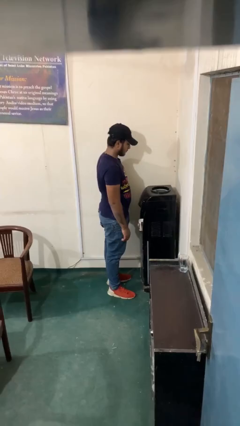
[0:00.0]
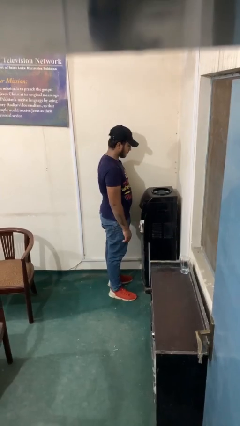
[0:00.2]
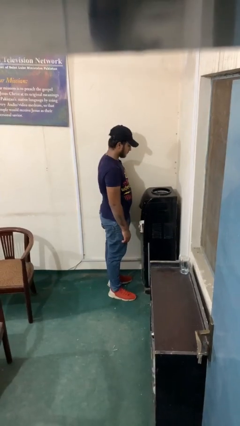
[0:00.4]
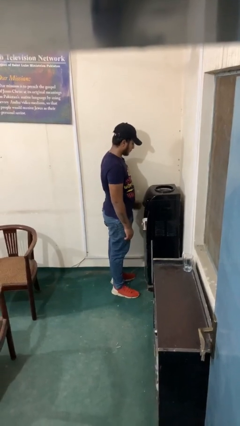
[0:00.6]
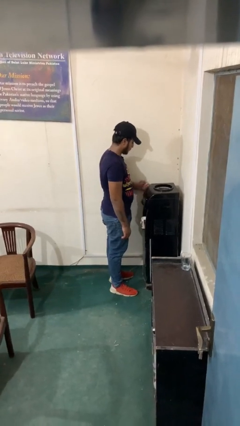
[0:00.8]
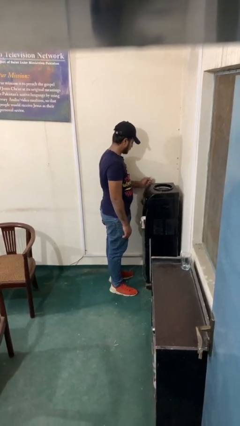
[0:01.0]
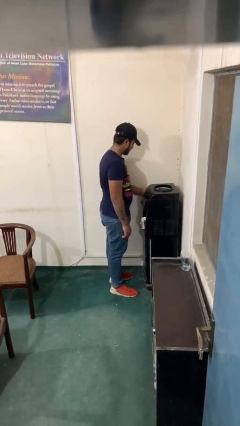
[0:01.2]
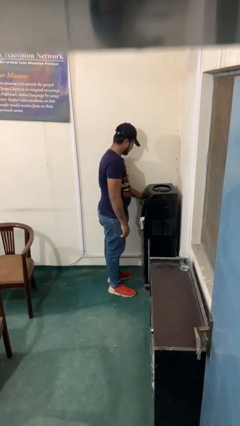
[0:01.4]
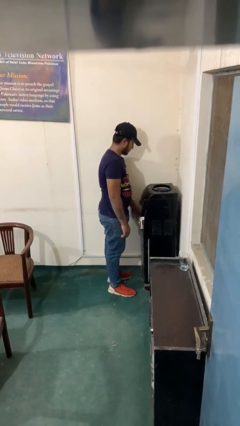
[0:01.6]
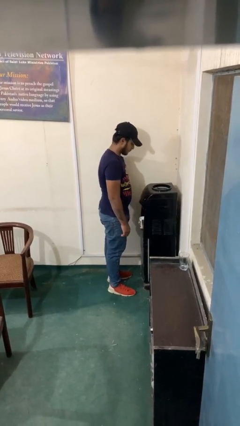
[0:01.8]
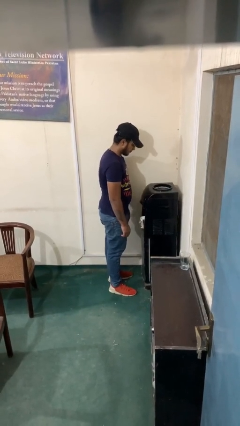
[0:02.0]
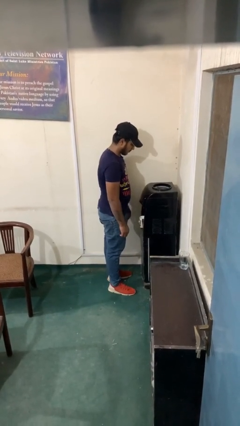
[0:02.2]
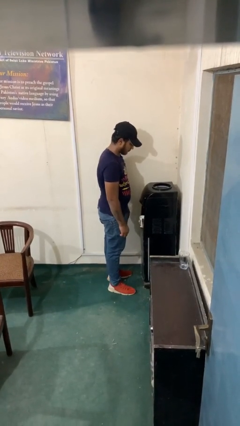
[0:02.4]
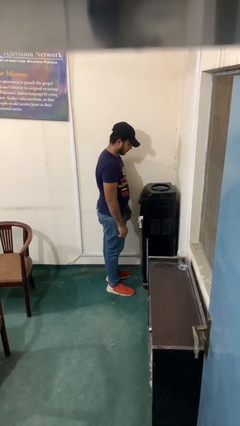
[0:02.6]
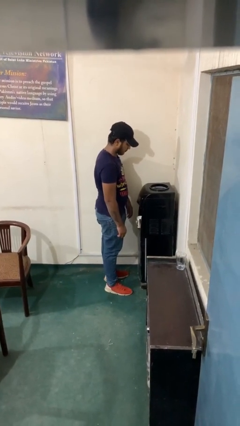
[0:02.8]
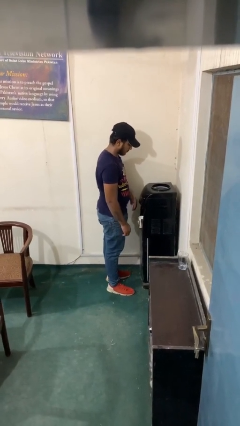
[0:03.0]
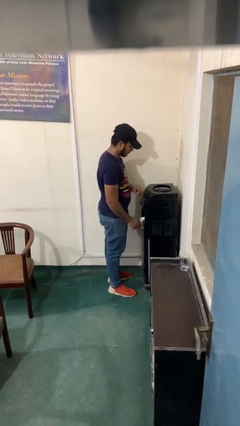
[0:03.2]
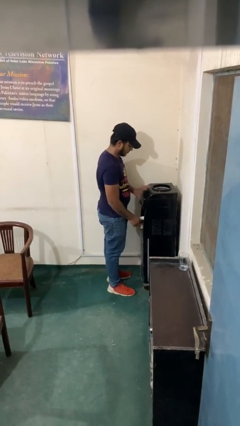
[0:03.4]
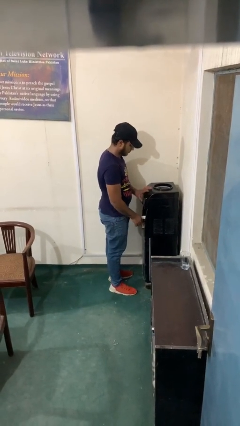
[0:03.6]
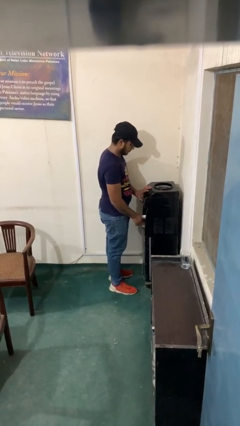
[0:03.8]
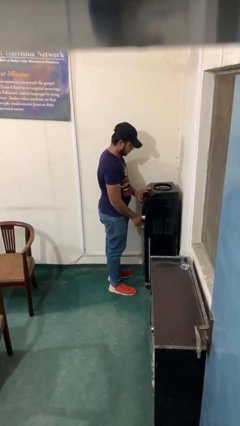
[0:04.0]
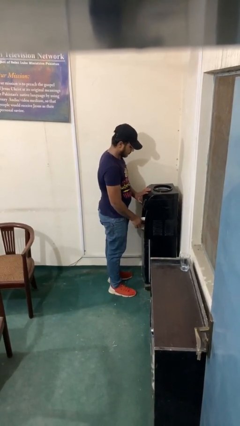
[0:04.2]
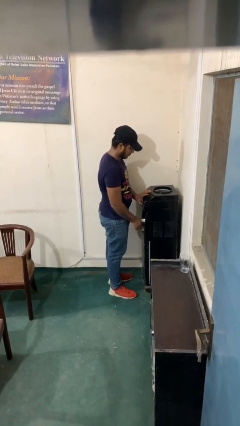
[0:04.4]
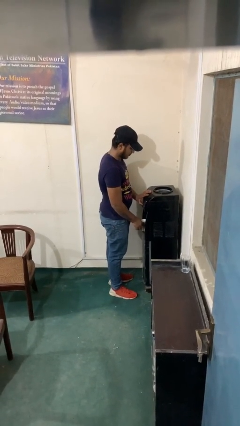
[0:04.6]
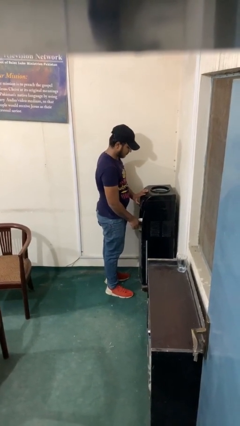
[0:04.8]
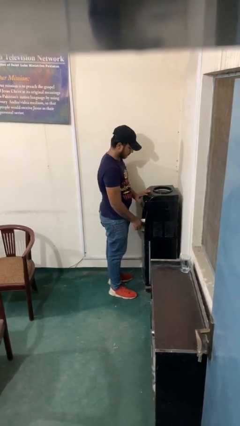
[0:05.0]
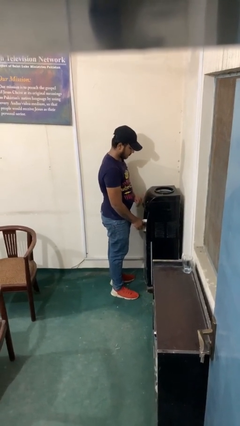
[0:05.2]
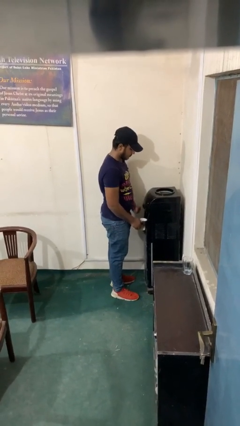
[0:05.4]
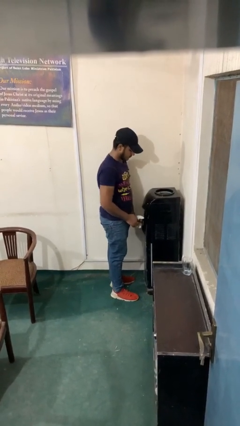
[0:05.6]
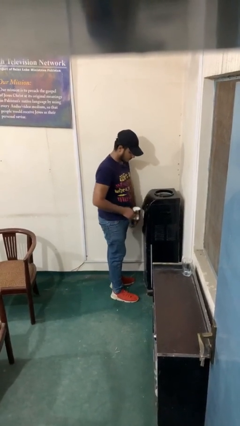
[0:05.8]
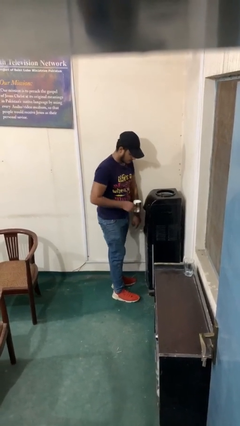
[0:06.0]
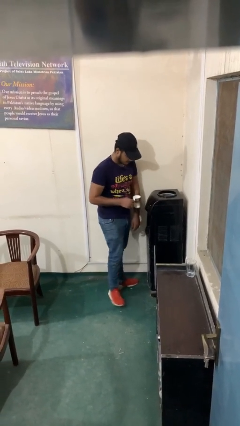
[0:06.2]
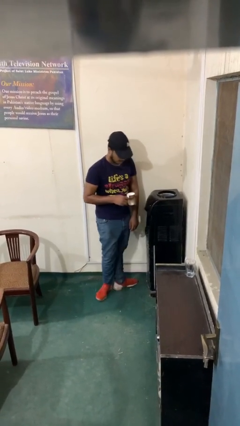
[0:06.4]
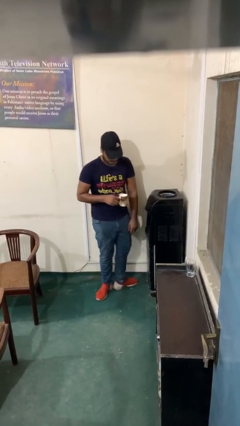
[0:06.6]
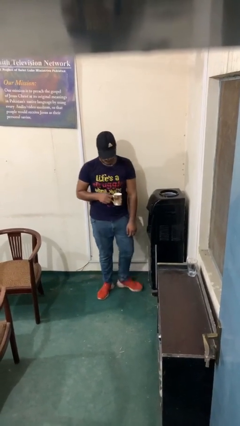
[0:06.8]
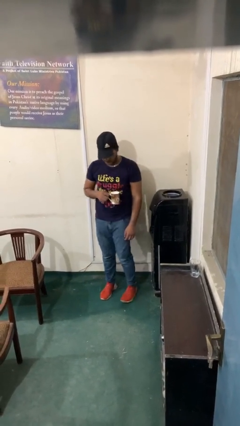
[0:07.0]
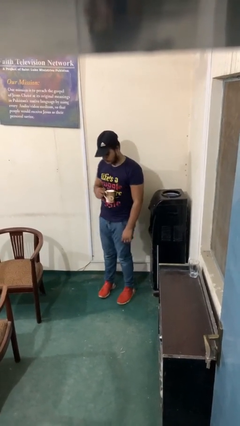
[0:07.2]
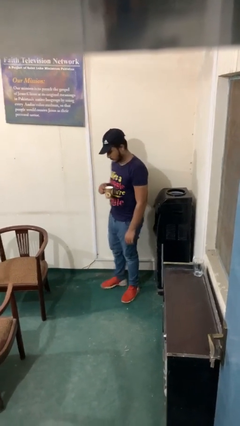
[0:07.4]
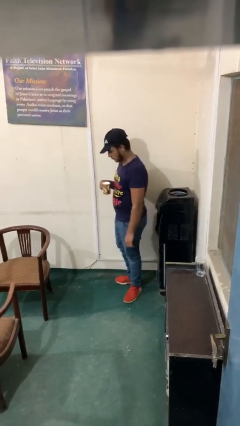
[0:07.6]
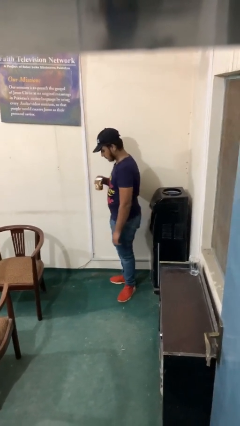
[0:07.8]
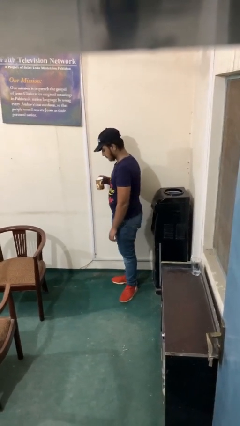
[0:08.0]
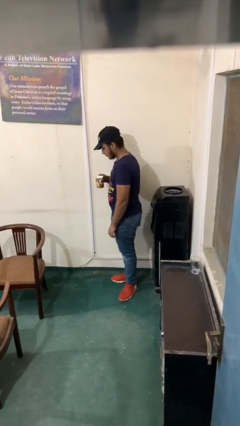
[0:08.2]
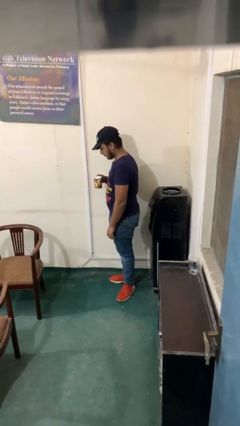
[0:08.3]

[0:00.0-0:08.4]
person purchases from machine

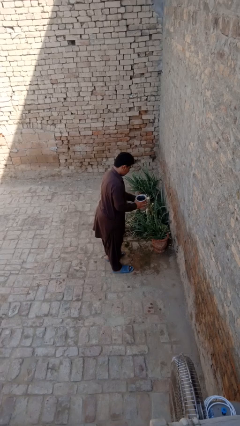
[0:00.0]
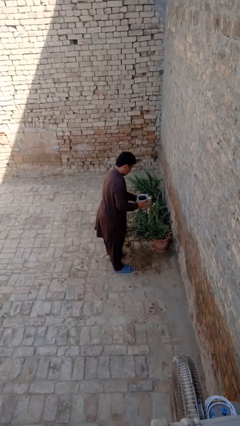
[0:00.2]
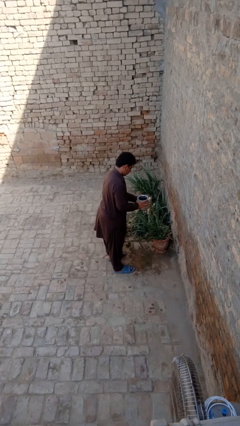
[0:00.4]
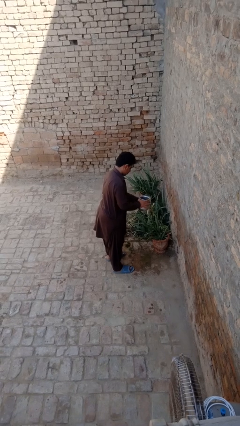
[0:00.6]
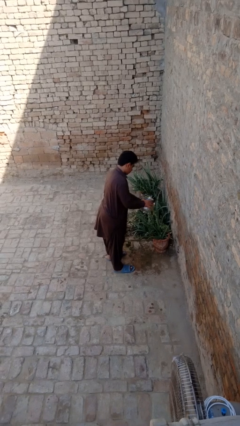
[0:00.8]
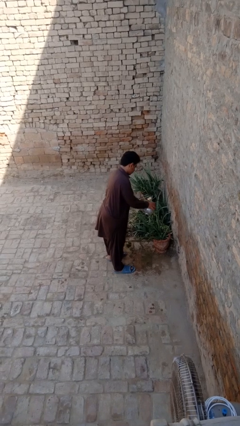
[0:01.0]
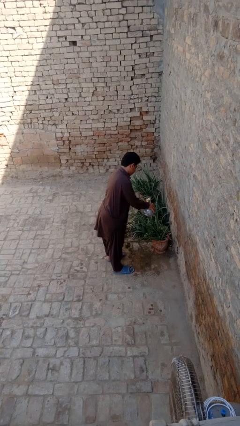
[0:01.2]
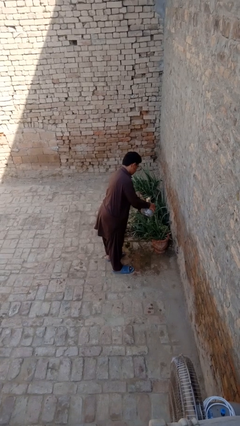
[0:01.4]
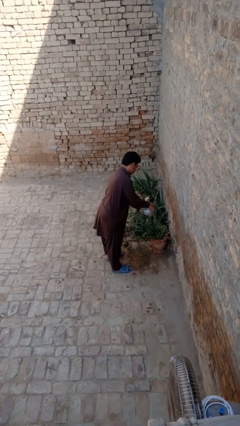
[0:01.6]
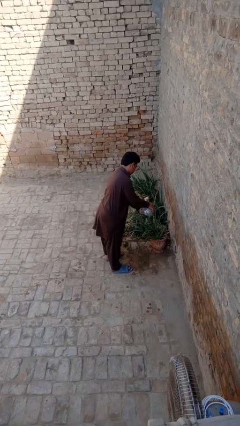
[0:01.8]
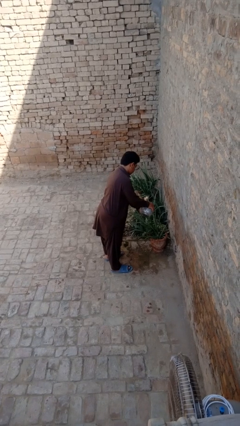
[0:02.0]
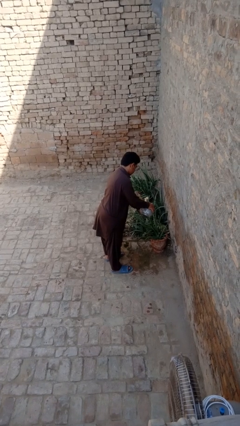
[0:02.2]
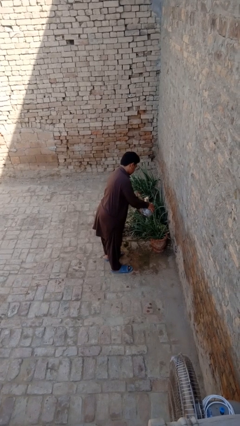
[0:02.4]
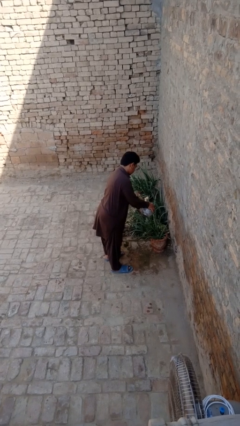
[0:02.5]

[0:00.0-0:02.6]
person waters houseplant

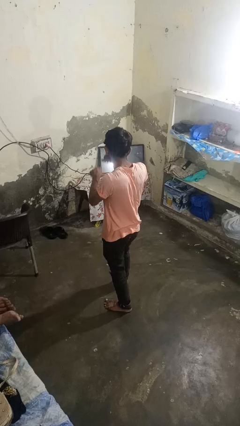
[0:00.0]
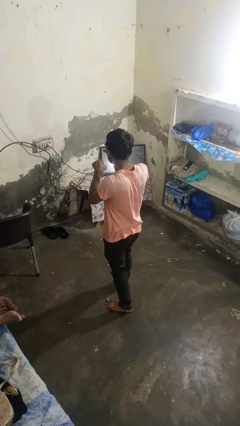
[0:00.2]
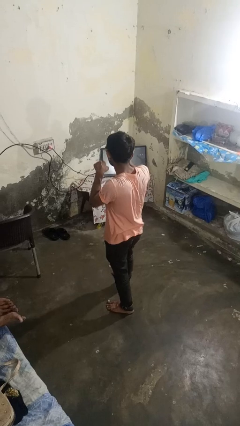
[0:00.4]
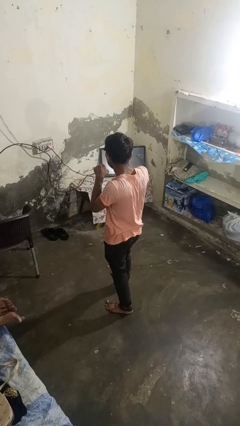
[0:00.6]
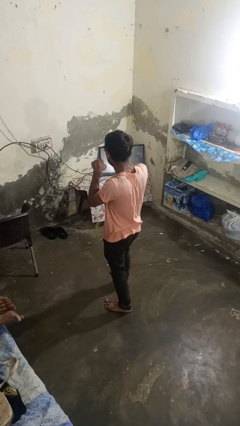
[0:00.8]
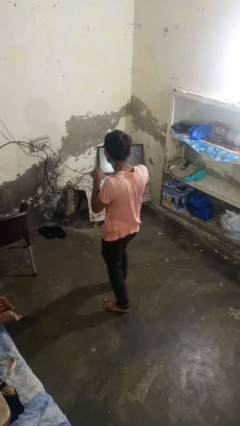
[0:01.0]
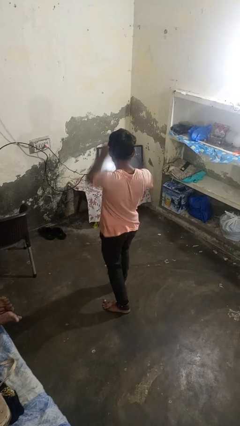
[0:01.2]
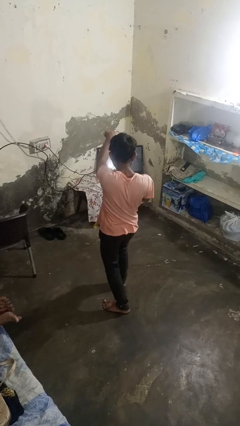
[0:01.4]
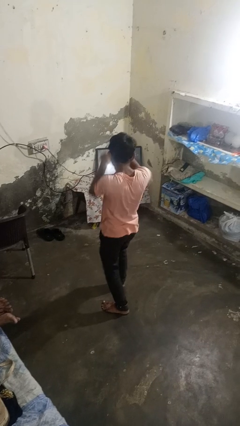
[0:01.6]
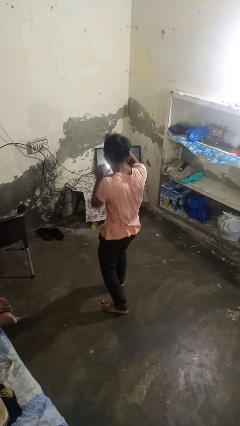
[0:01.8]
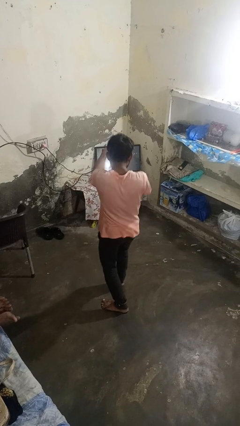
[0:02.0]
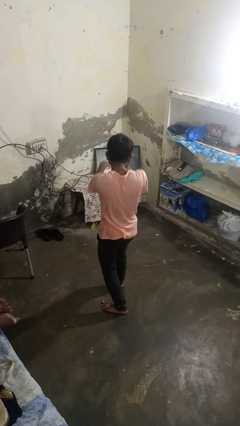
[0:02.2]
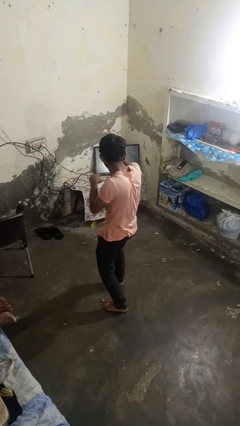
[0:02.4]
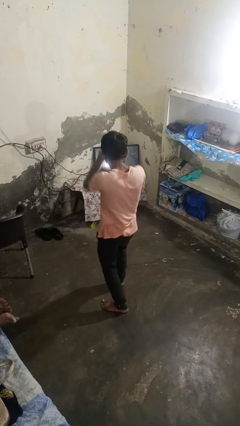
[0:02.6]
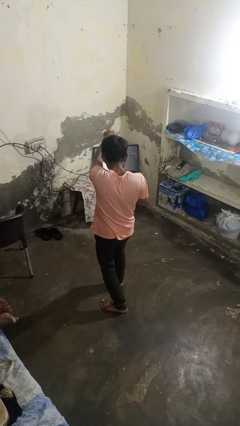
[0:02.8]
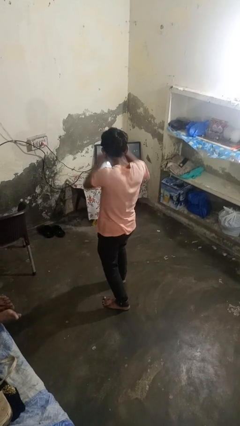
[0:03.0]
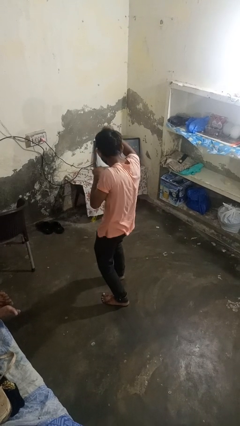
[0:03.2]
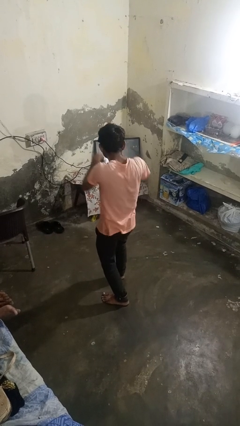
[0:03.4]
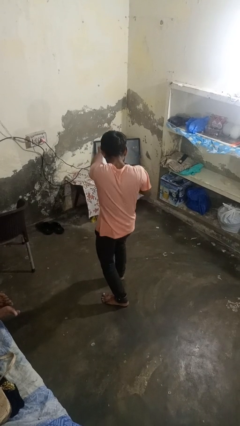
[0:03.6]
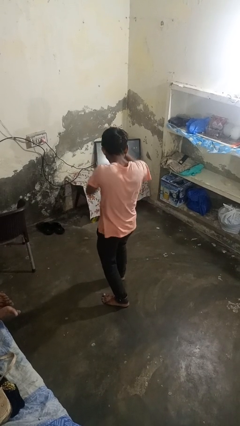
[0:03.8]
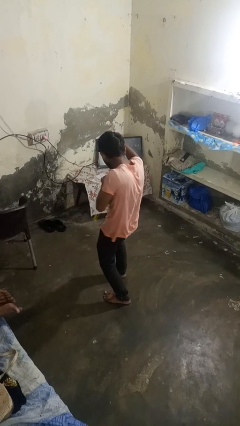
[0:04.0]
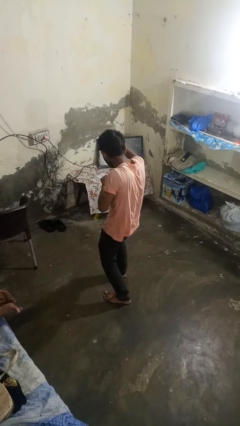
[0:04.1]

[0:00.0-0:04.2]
person punches

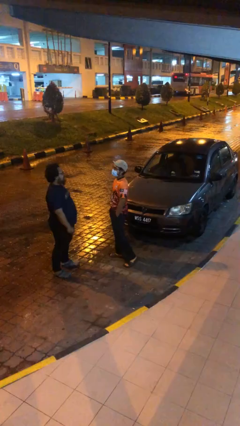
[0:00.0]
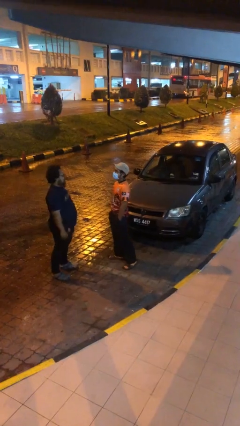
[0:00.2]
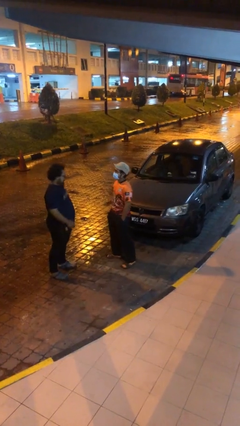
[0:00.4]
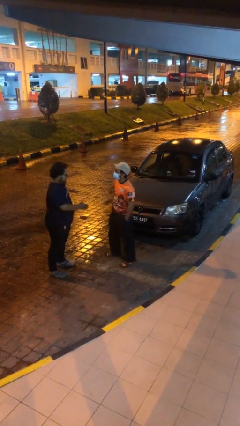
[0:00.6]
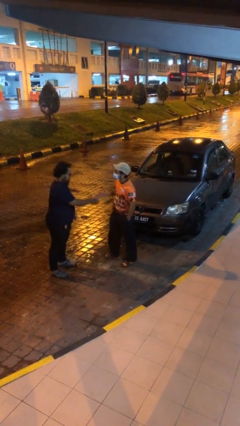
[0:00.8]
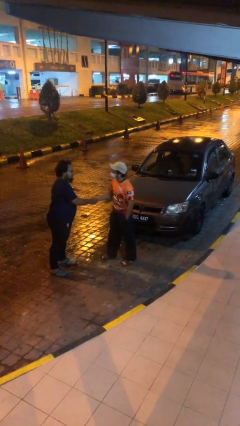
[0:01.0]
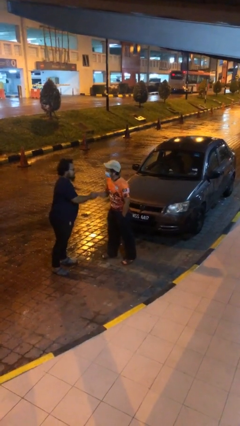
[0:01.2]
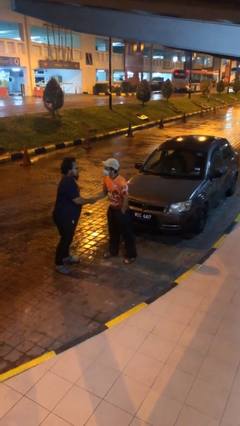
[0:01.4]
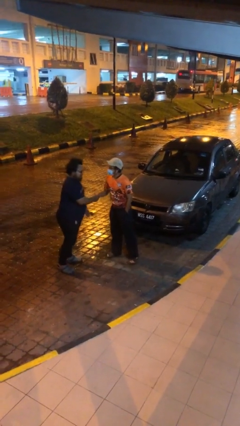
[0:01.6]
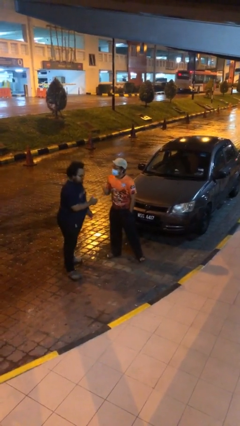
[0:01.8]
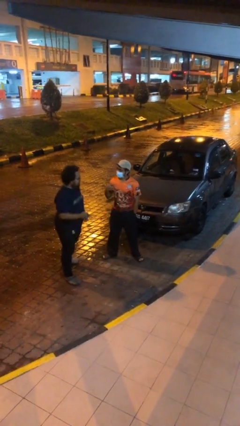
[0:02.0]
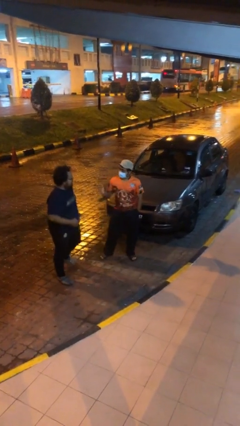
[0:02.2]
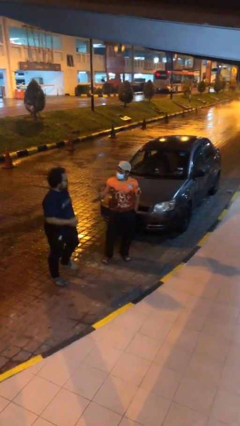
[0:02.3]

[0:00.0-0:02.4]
person shakes hand
